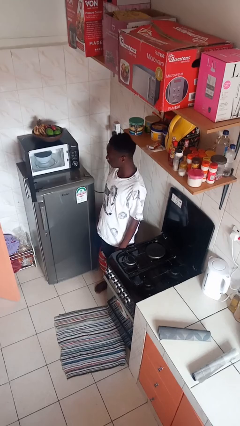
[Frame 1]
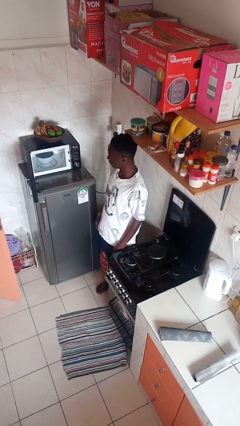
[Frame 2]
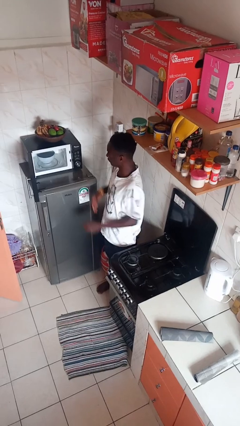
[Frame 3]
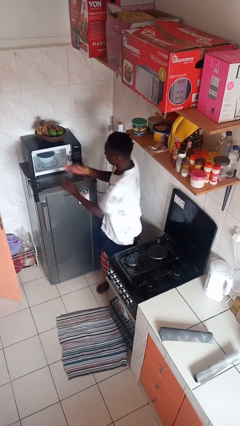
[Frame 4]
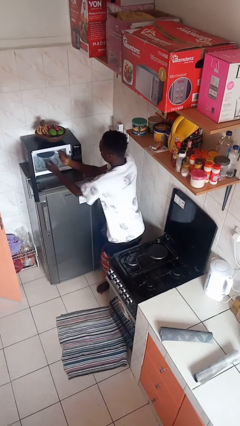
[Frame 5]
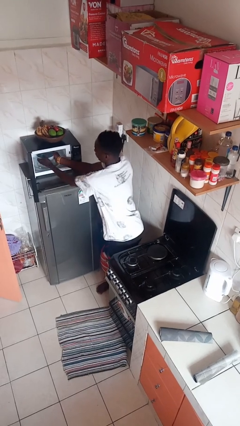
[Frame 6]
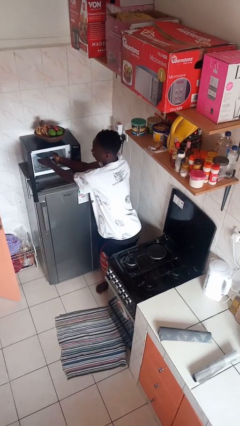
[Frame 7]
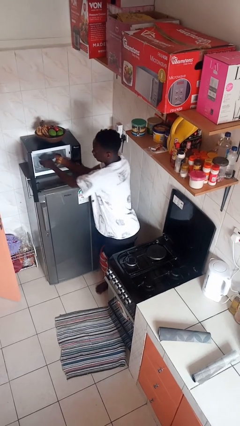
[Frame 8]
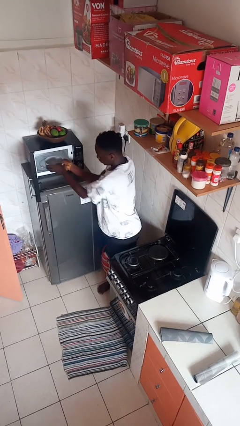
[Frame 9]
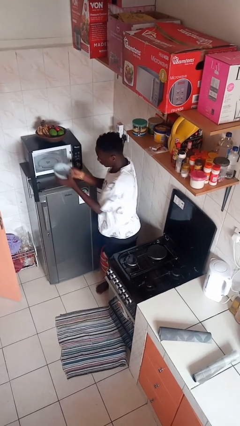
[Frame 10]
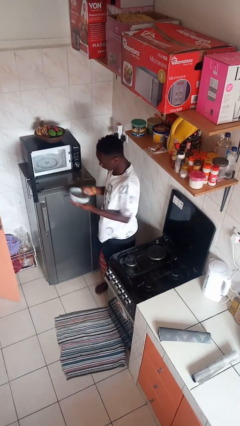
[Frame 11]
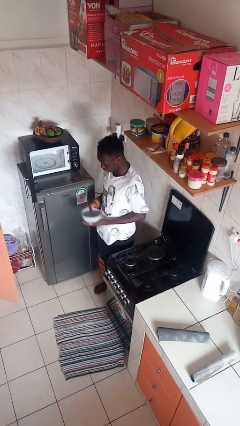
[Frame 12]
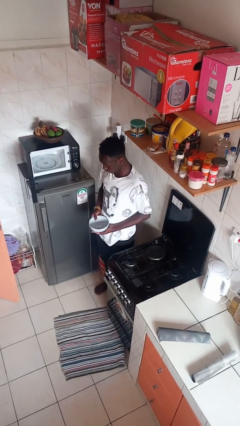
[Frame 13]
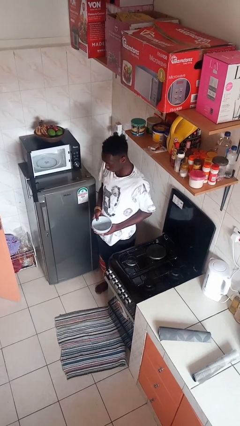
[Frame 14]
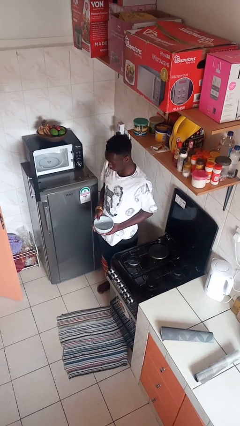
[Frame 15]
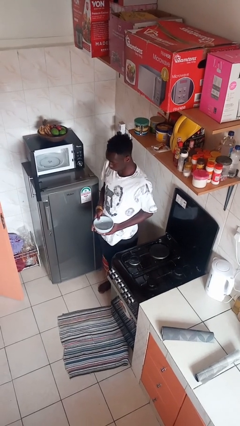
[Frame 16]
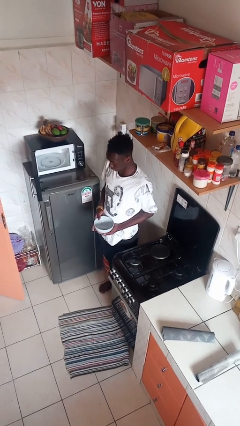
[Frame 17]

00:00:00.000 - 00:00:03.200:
person takes object from microwave

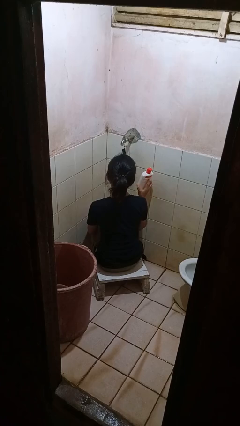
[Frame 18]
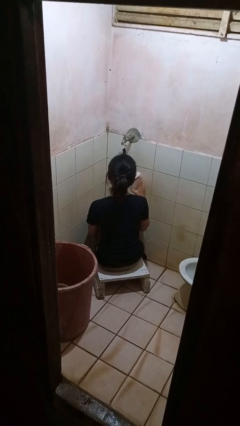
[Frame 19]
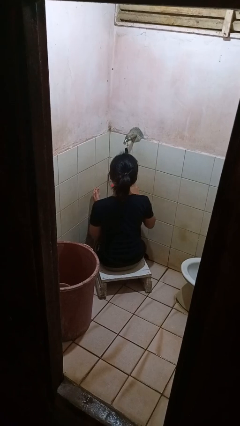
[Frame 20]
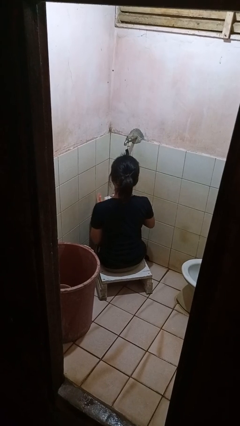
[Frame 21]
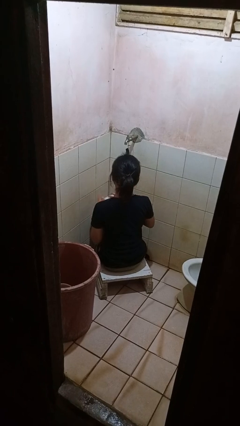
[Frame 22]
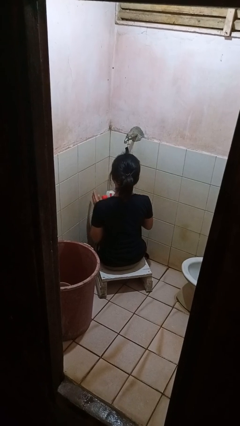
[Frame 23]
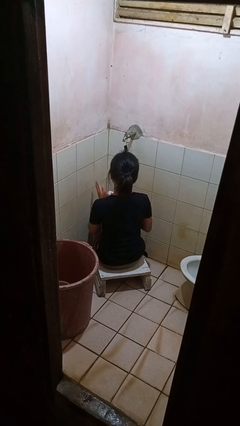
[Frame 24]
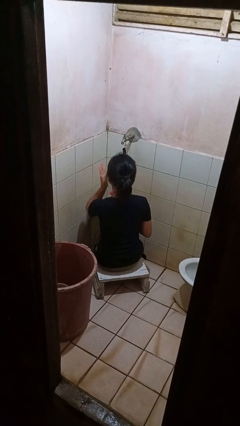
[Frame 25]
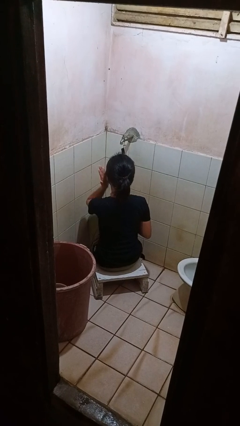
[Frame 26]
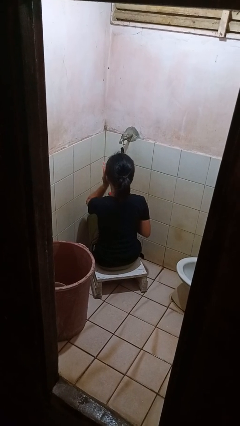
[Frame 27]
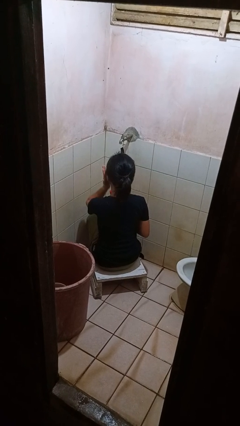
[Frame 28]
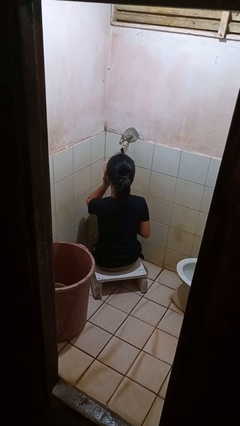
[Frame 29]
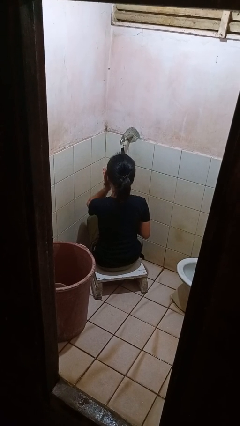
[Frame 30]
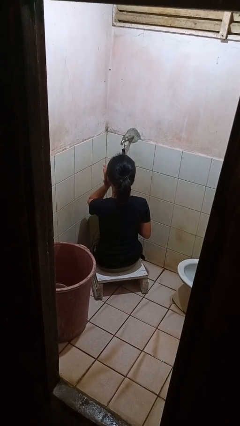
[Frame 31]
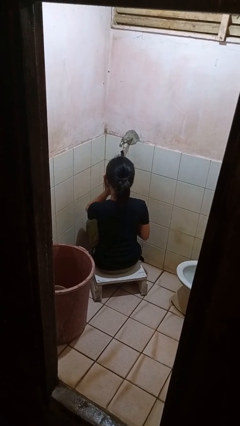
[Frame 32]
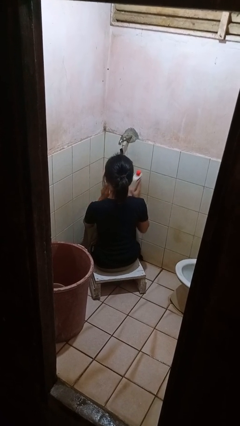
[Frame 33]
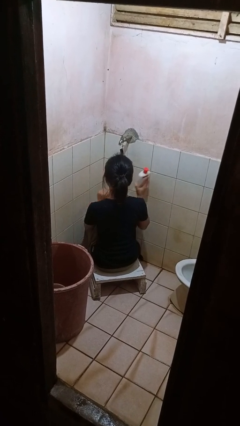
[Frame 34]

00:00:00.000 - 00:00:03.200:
person applies facial moisturizer

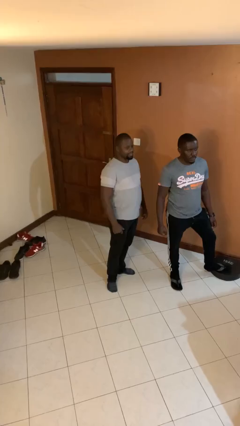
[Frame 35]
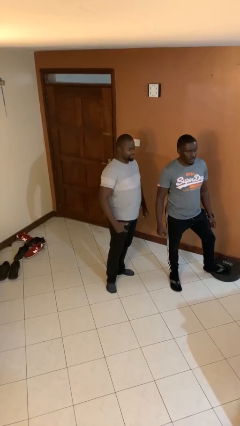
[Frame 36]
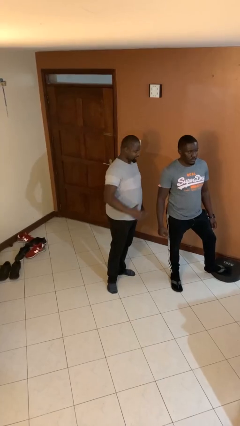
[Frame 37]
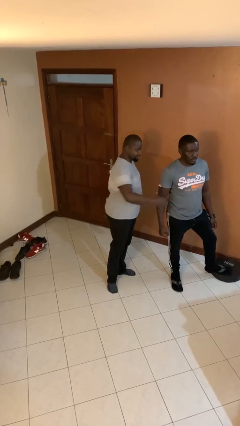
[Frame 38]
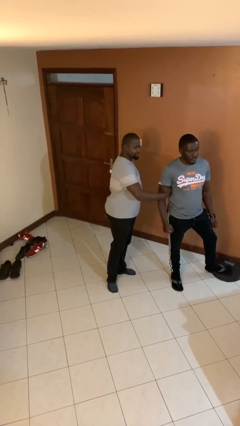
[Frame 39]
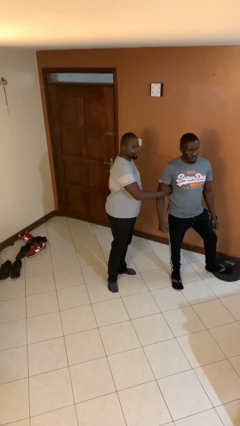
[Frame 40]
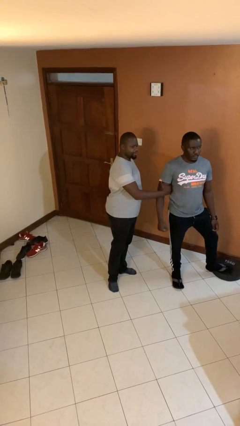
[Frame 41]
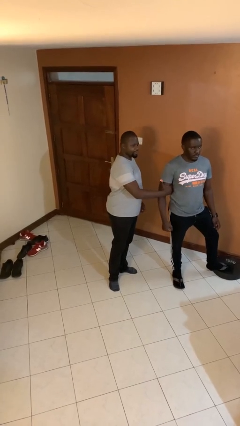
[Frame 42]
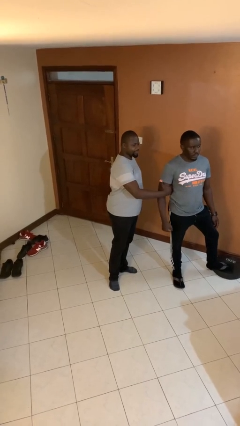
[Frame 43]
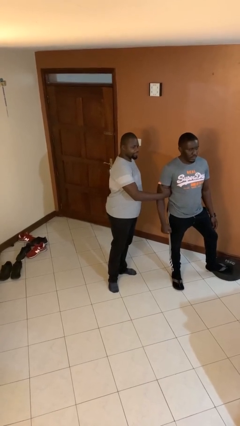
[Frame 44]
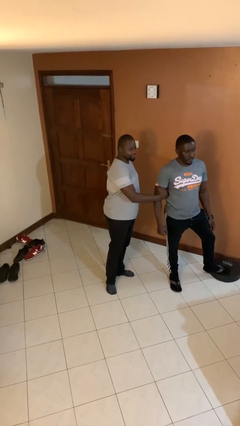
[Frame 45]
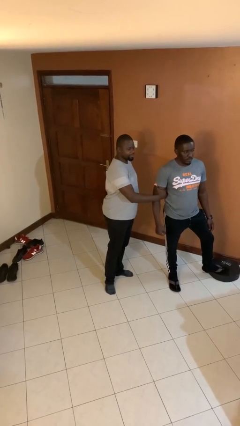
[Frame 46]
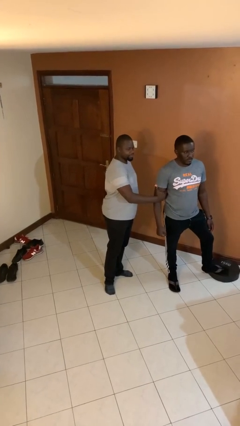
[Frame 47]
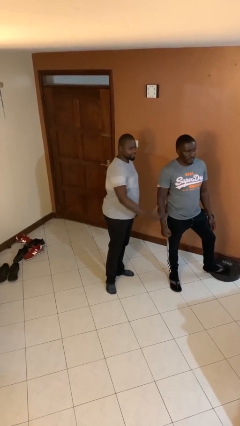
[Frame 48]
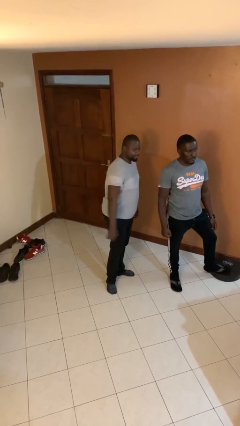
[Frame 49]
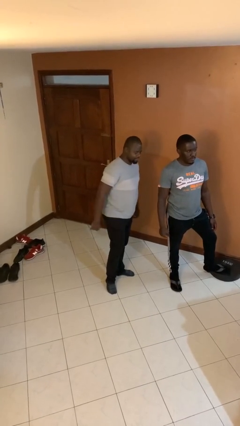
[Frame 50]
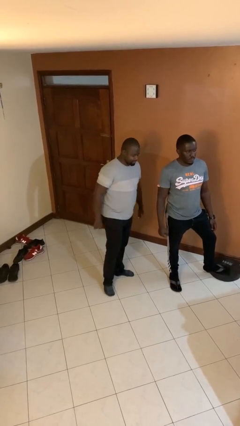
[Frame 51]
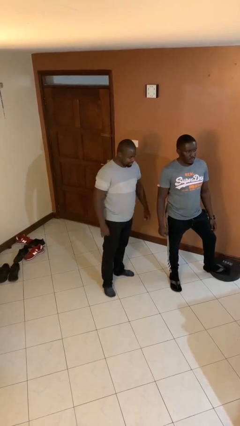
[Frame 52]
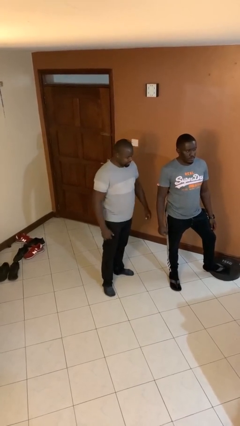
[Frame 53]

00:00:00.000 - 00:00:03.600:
person grabs person by bicep

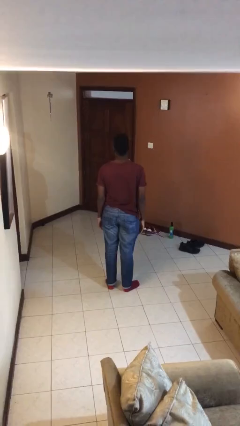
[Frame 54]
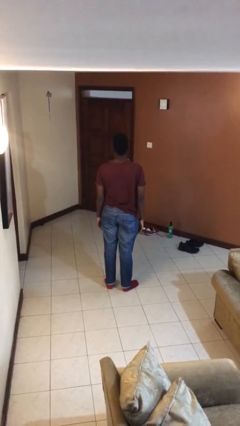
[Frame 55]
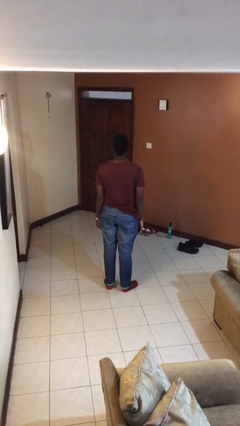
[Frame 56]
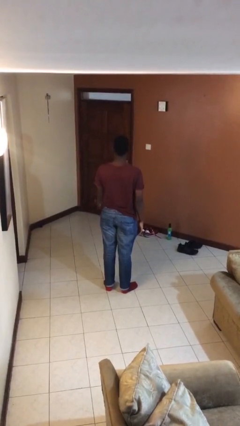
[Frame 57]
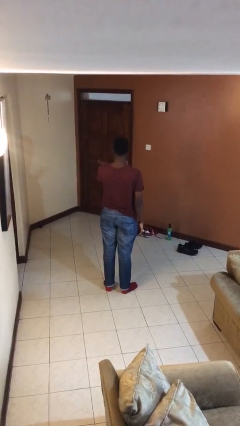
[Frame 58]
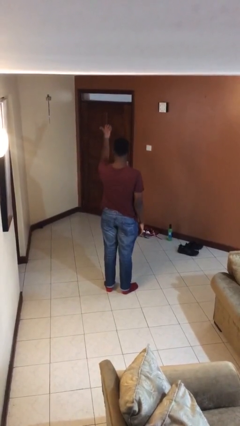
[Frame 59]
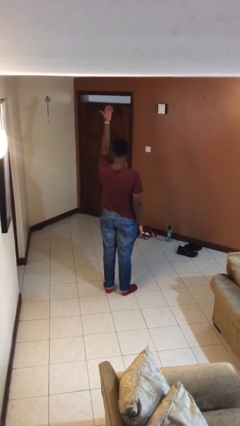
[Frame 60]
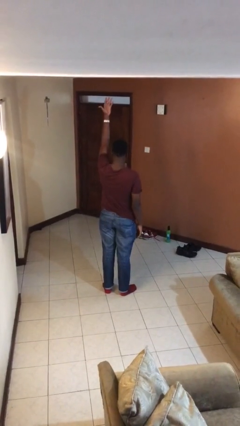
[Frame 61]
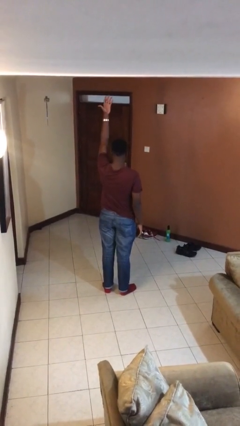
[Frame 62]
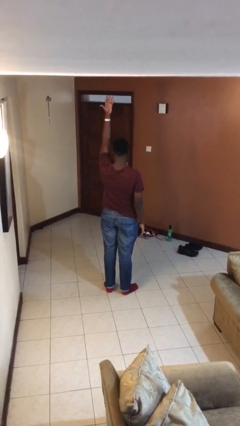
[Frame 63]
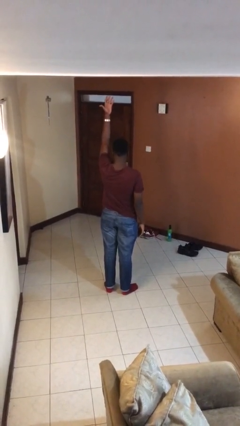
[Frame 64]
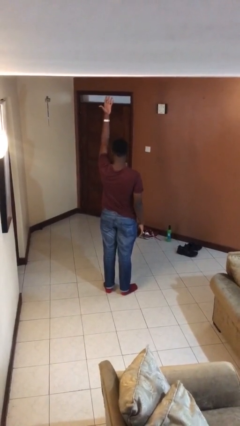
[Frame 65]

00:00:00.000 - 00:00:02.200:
person gestures swipe up

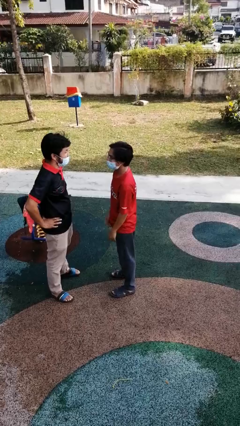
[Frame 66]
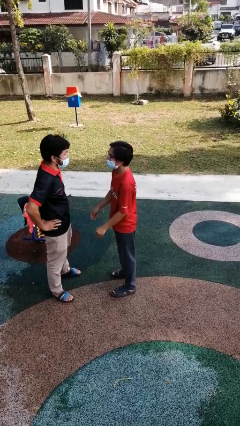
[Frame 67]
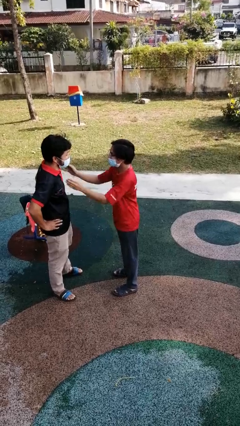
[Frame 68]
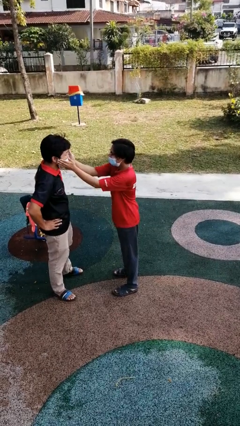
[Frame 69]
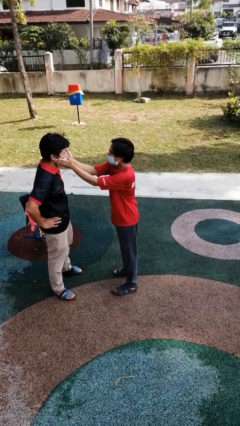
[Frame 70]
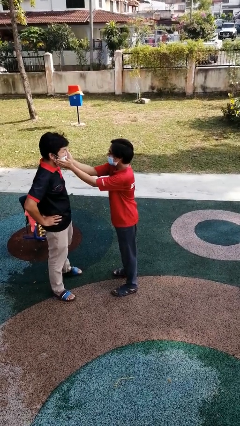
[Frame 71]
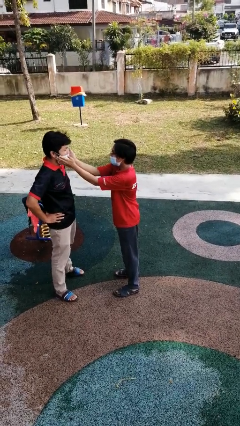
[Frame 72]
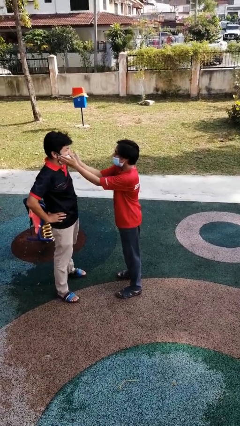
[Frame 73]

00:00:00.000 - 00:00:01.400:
person touches face of person

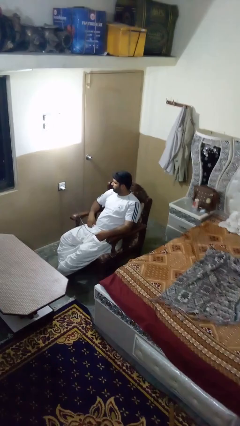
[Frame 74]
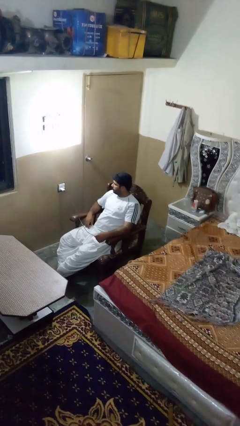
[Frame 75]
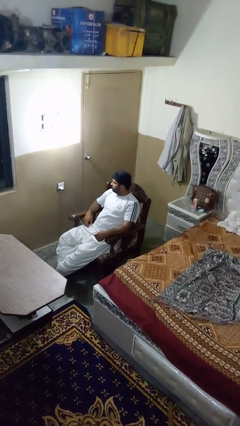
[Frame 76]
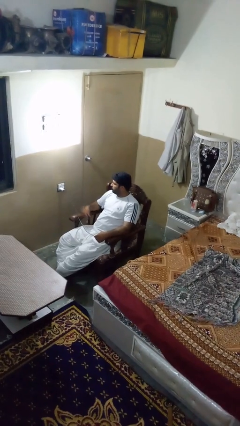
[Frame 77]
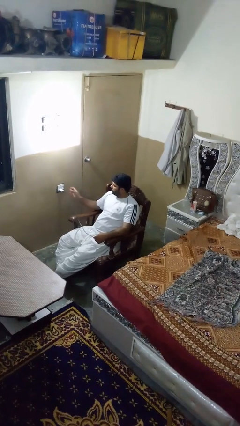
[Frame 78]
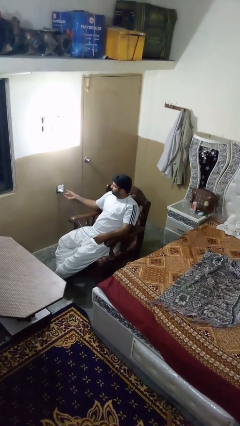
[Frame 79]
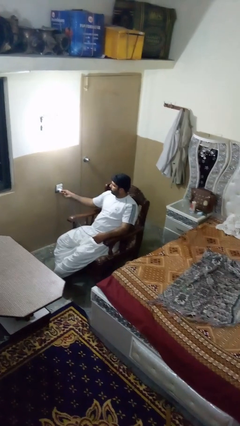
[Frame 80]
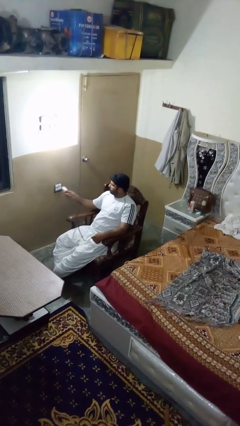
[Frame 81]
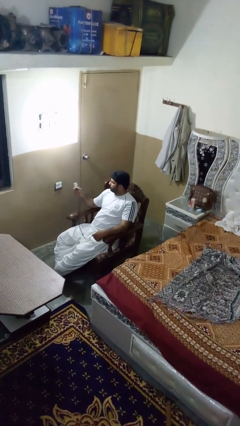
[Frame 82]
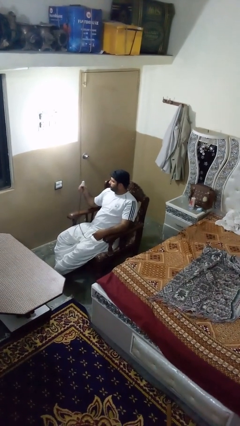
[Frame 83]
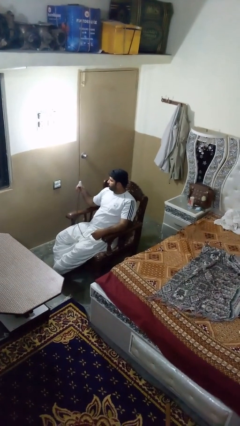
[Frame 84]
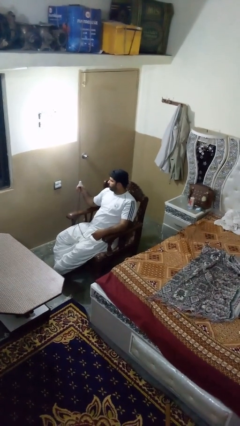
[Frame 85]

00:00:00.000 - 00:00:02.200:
person unplugs from electrical socket

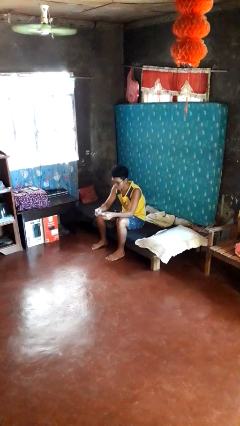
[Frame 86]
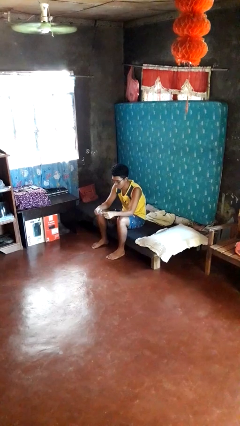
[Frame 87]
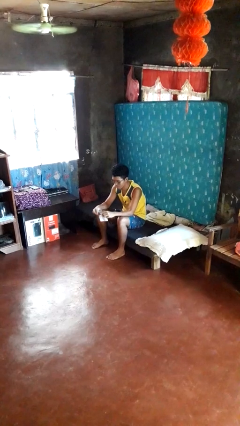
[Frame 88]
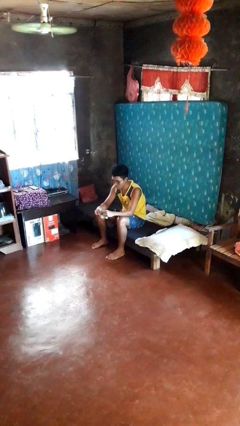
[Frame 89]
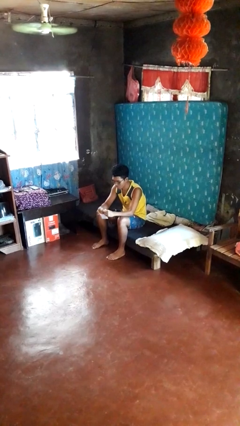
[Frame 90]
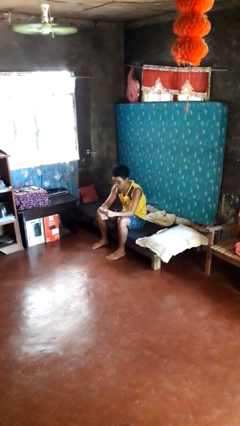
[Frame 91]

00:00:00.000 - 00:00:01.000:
person tears paper

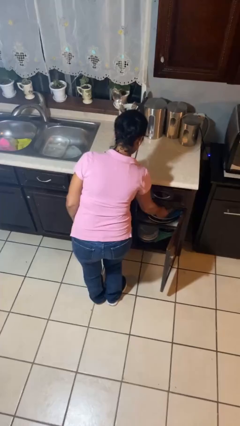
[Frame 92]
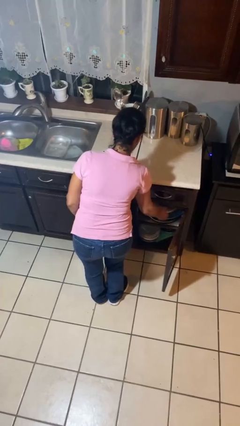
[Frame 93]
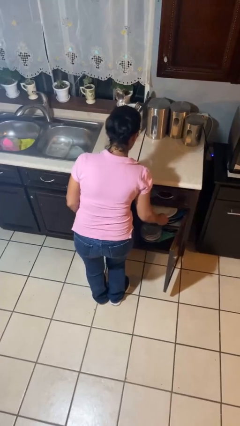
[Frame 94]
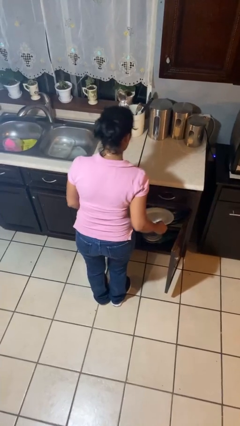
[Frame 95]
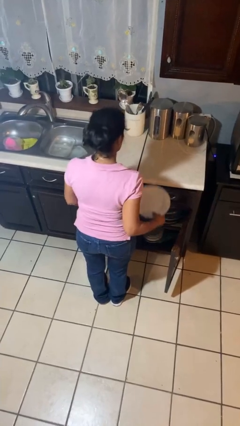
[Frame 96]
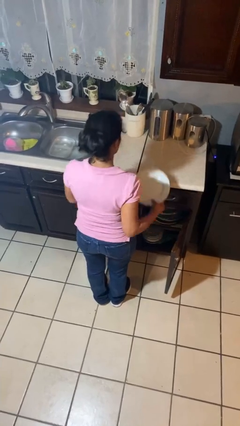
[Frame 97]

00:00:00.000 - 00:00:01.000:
person puts object in cabinet
